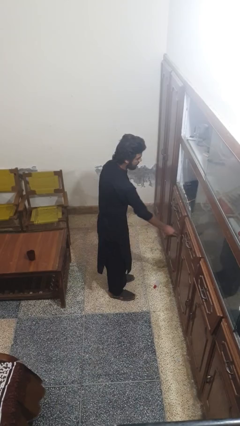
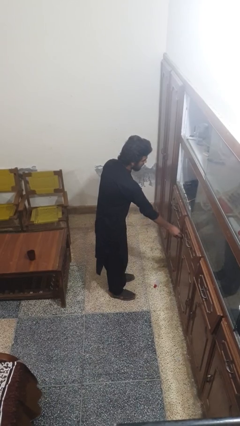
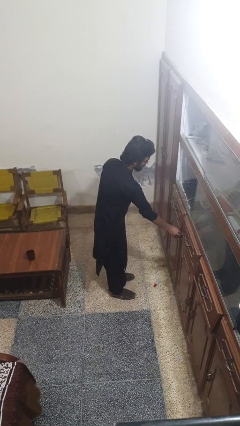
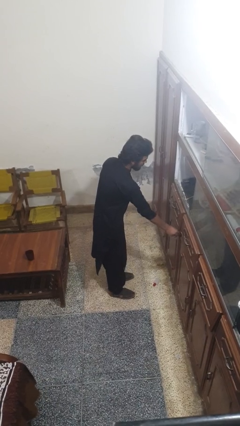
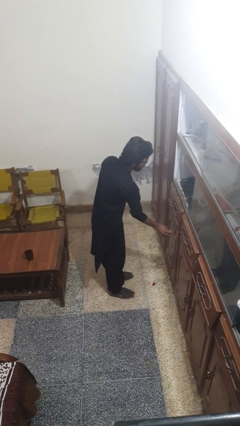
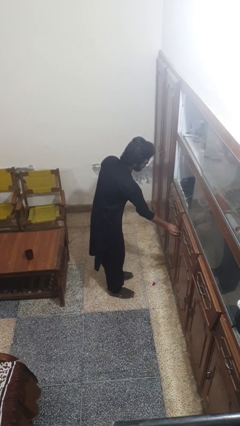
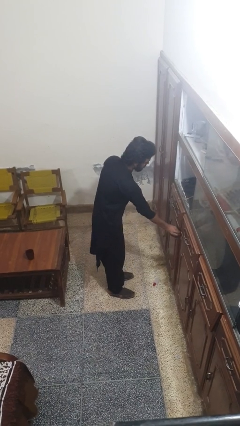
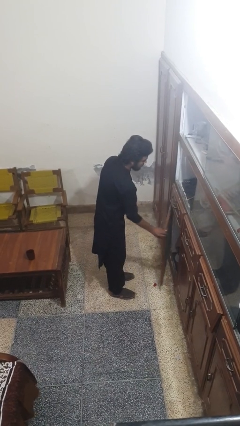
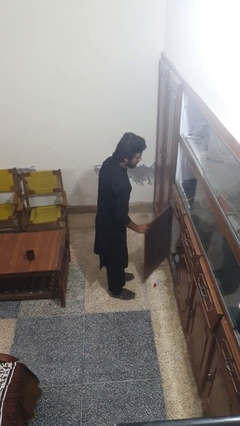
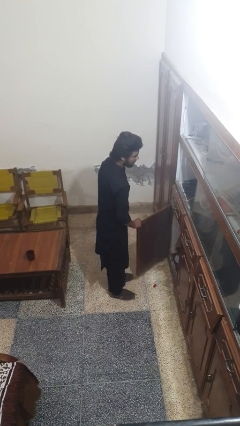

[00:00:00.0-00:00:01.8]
person opens cabinet

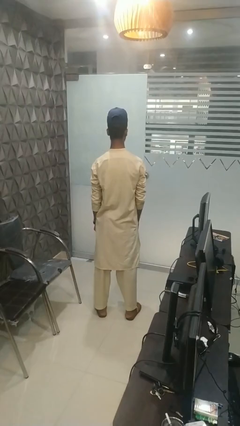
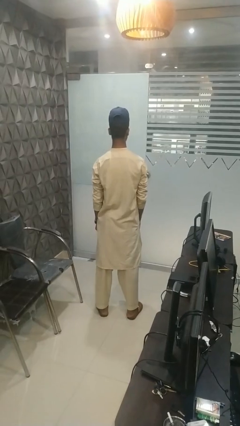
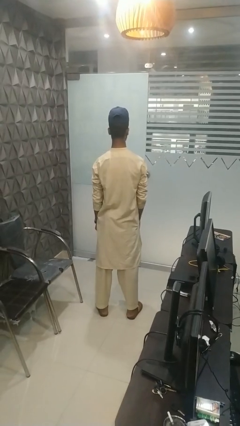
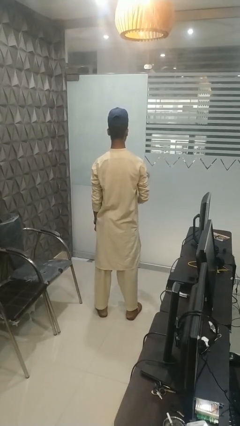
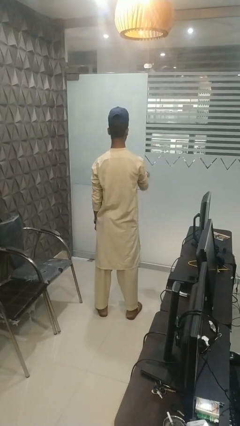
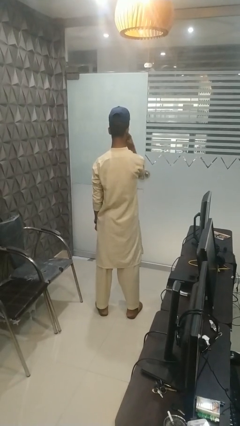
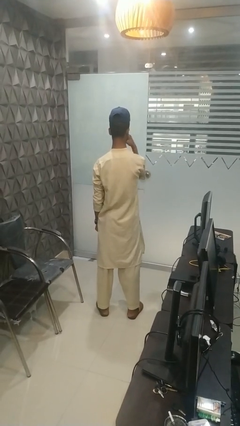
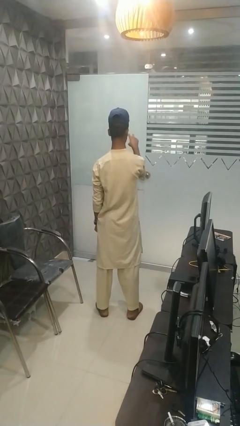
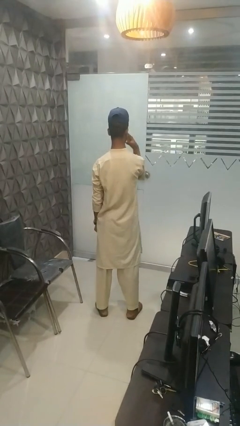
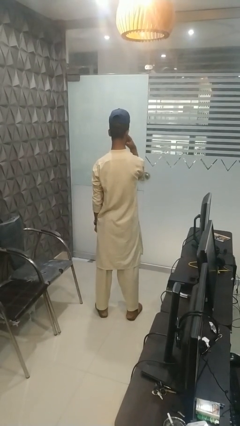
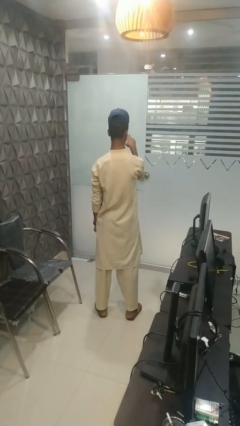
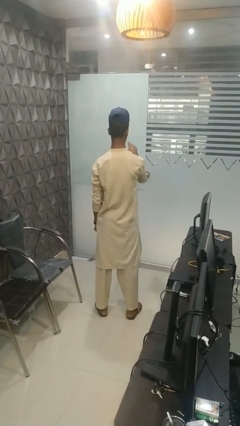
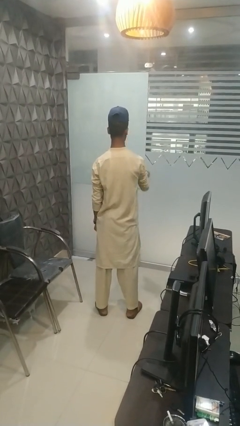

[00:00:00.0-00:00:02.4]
person gestures watch closely

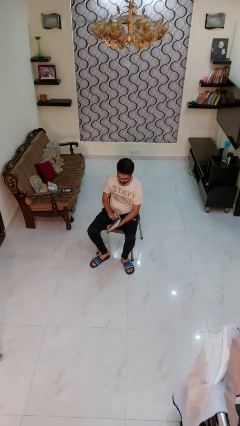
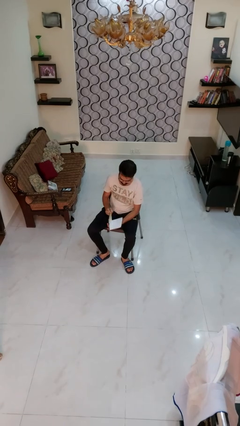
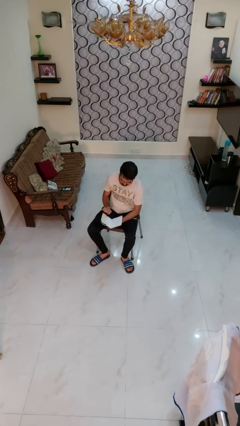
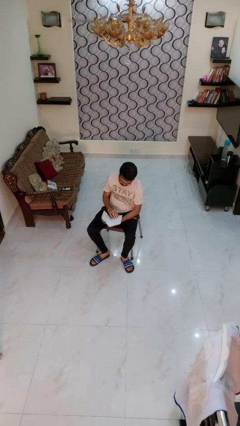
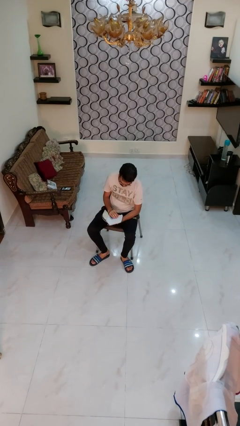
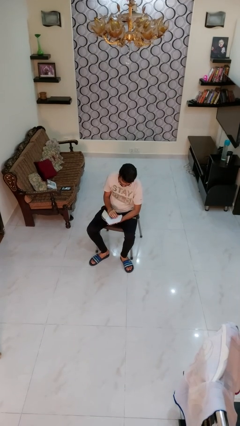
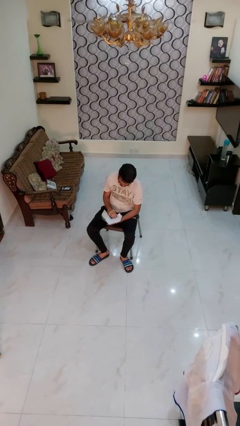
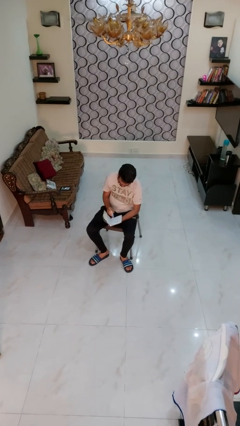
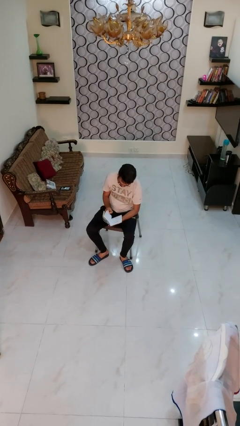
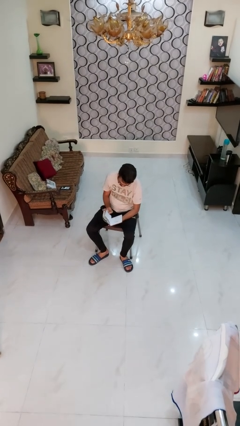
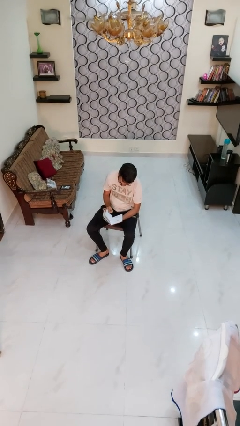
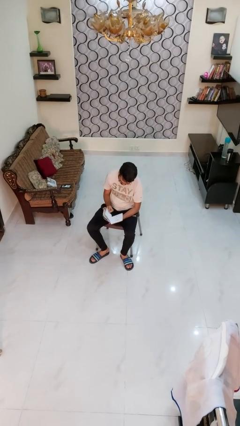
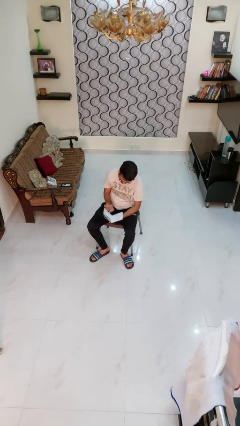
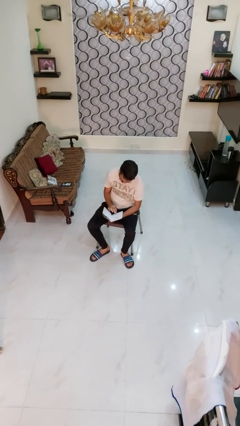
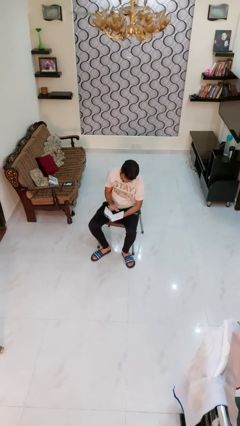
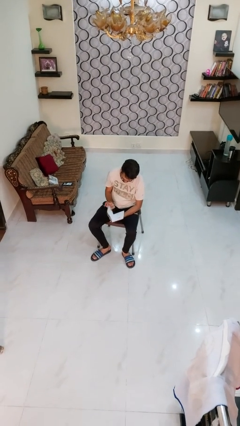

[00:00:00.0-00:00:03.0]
person reads book

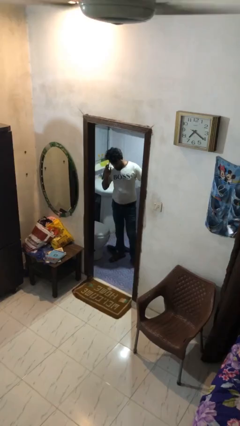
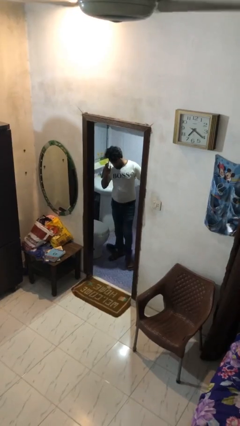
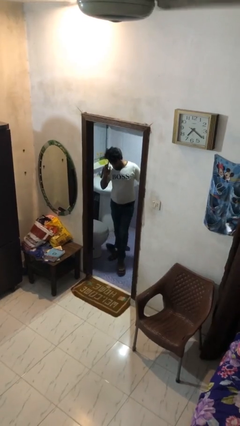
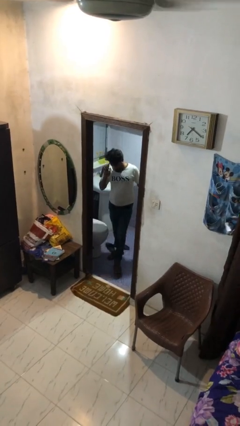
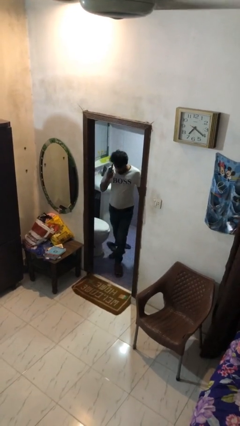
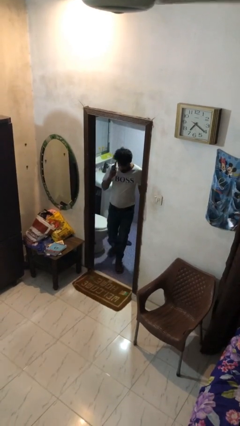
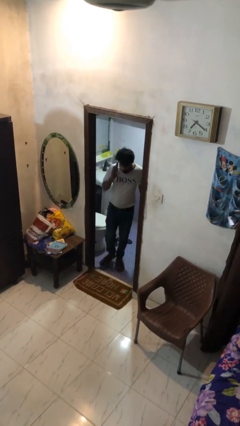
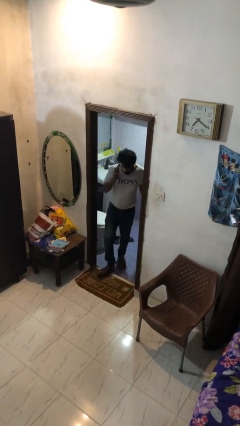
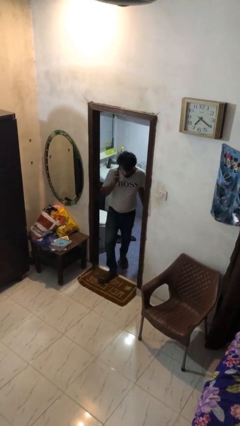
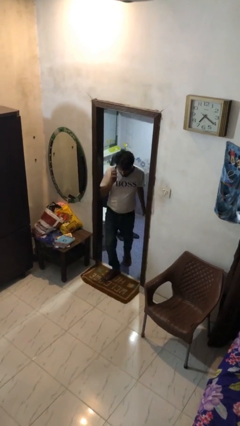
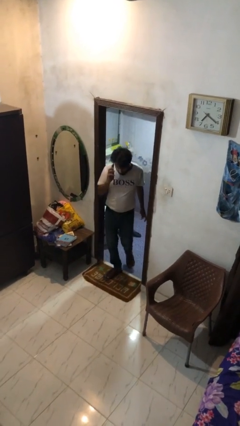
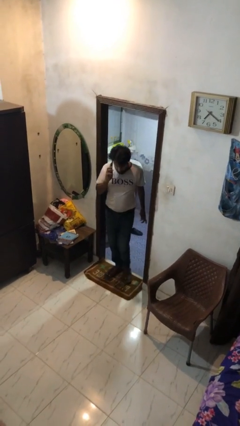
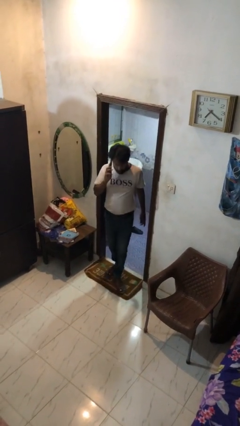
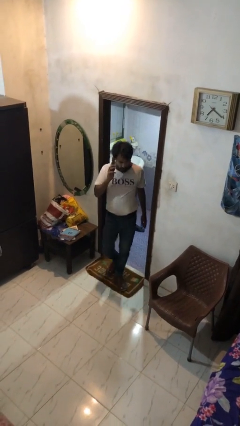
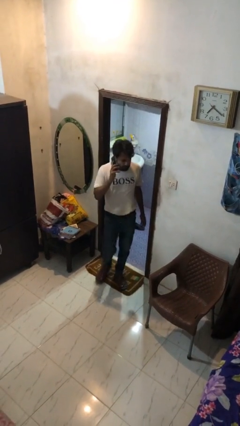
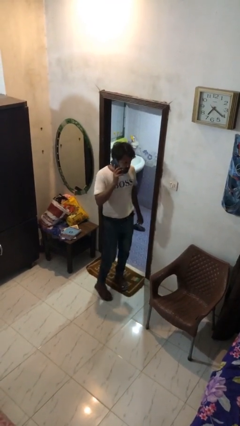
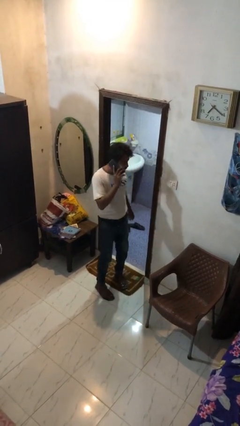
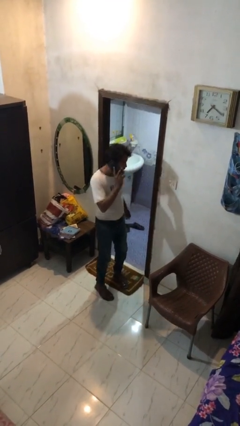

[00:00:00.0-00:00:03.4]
person enters scene through structure

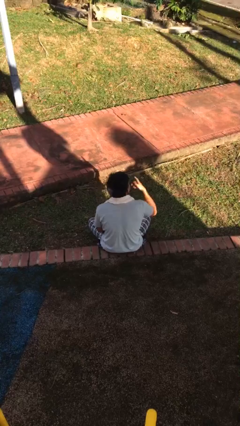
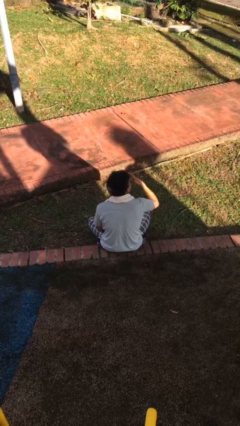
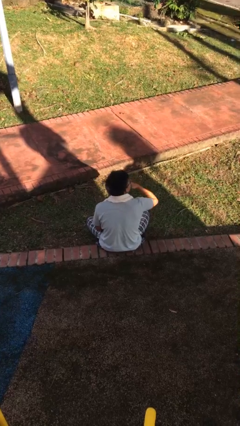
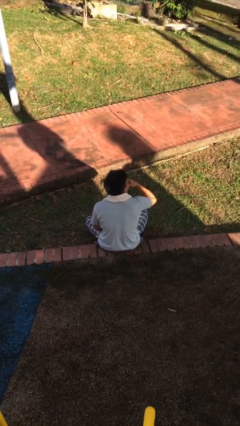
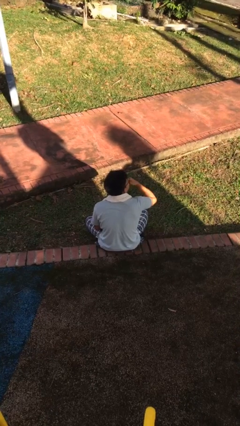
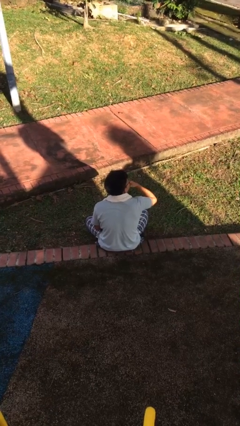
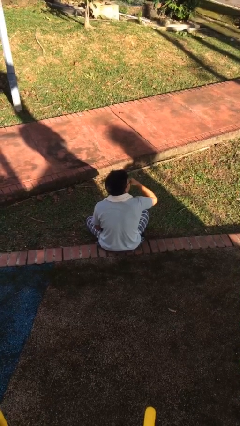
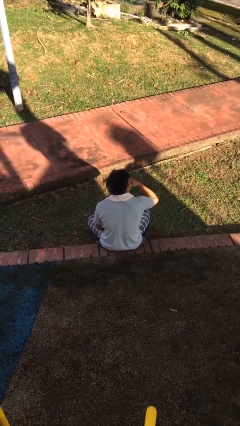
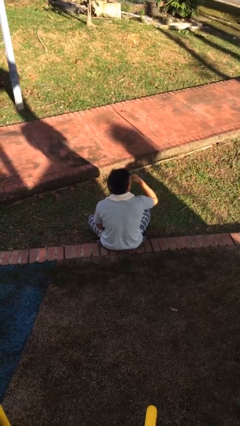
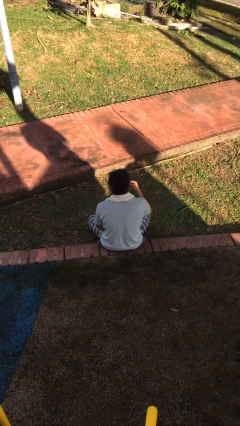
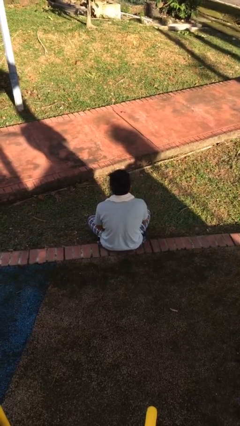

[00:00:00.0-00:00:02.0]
person strokes chin

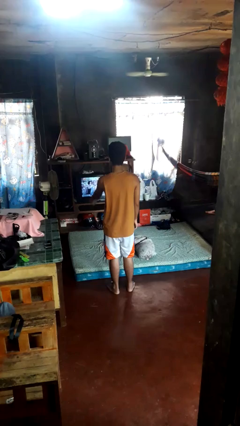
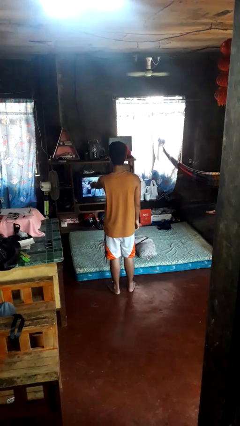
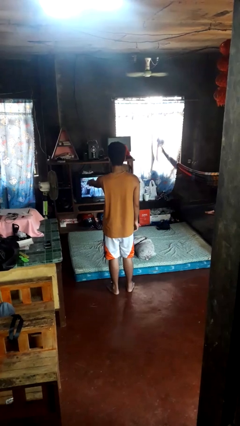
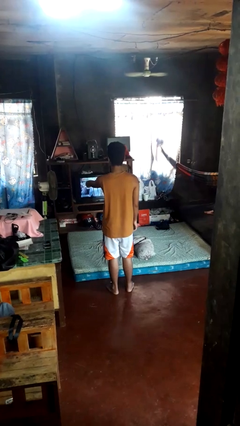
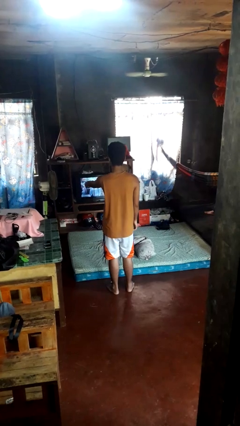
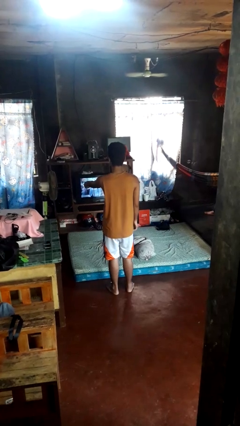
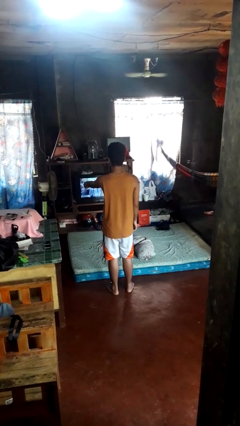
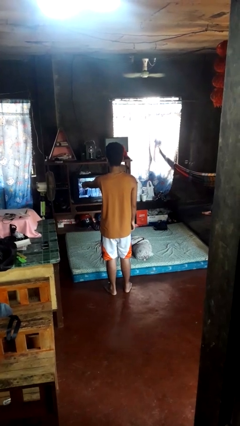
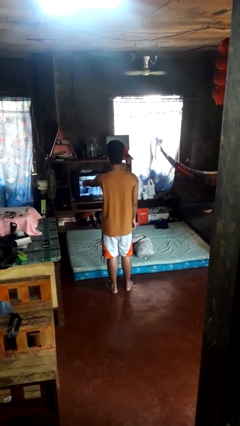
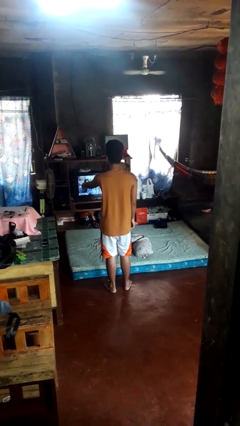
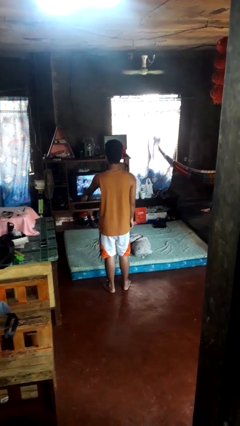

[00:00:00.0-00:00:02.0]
person uses television remote

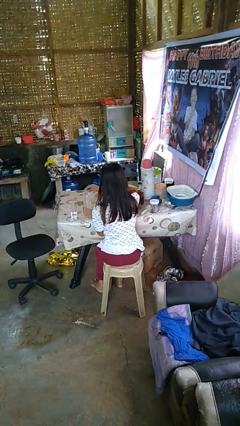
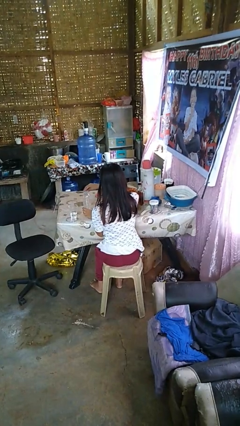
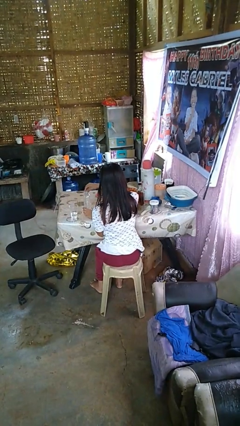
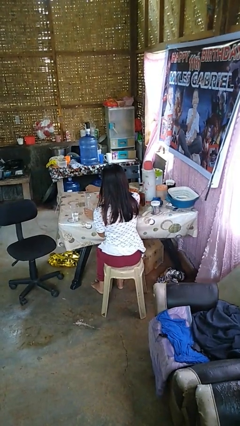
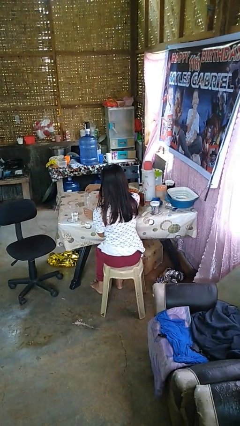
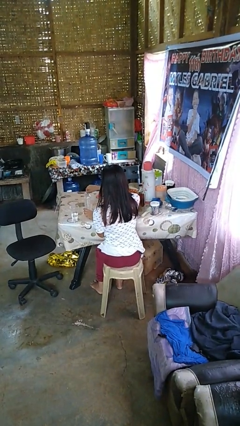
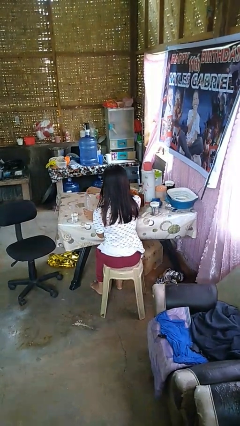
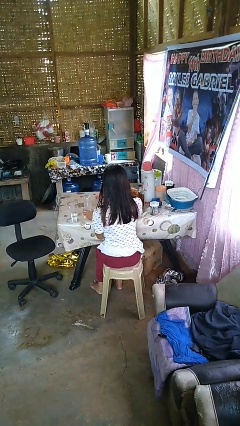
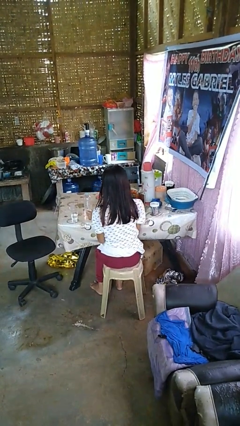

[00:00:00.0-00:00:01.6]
person screws lid to bottle

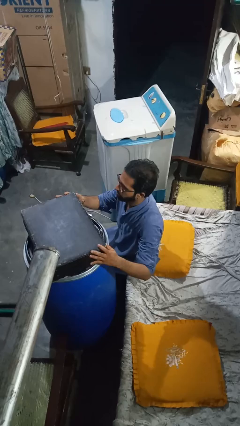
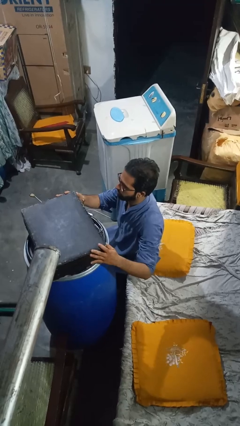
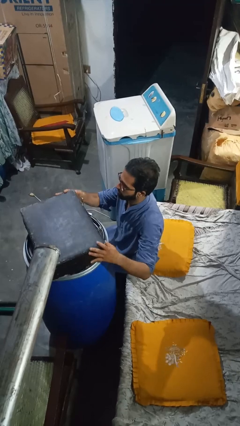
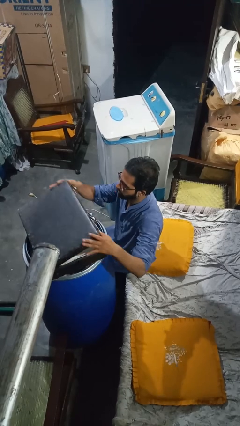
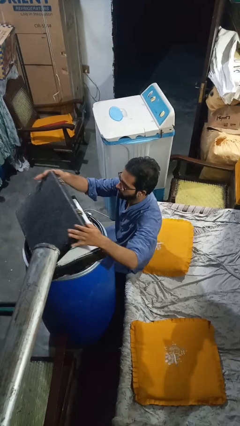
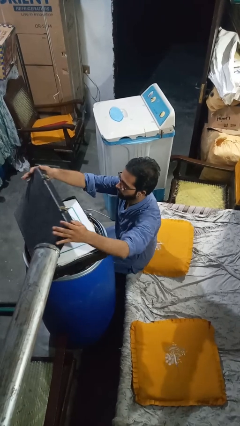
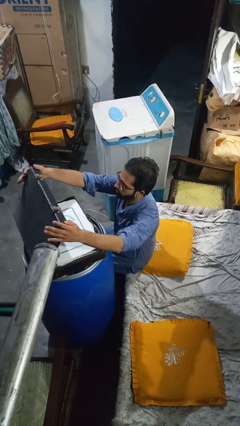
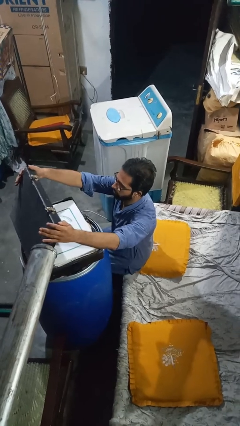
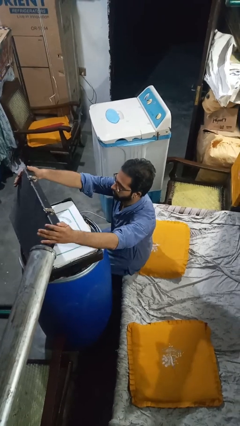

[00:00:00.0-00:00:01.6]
person opens suitcase
